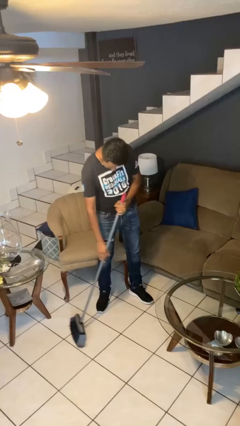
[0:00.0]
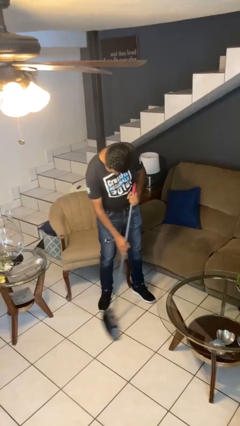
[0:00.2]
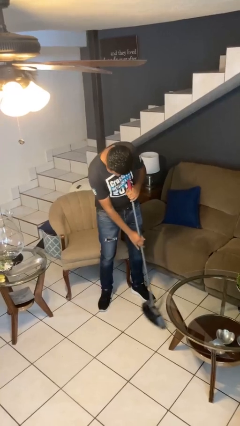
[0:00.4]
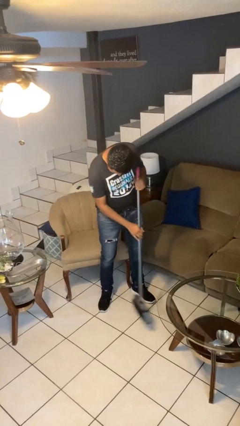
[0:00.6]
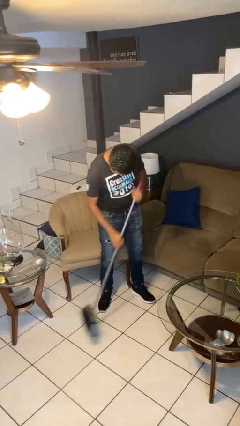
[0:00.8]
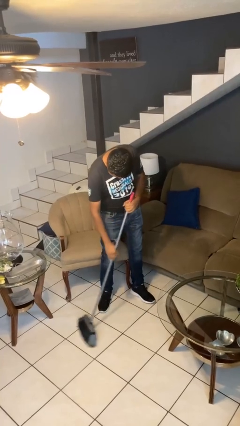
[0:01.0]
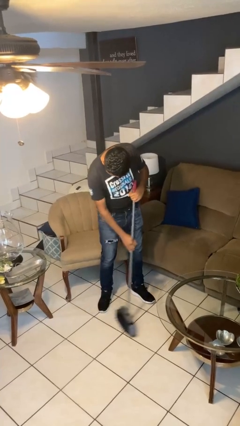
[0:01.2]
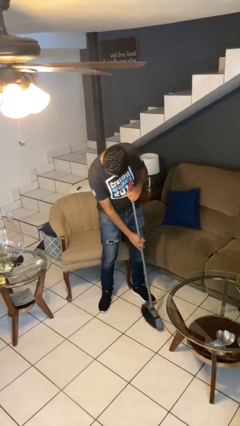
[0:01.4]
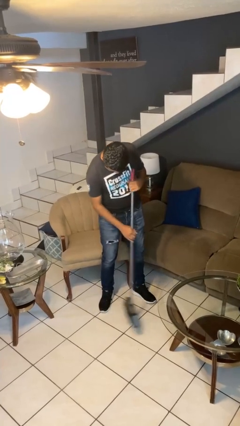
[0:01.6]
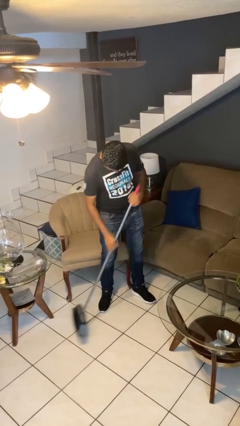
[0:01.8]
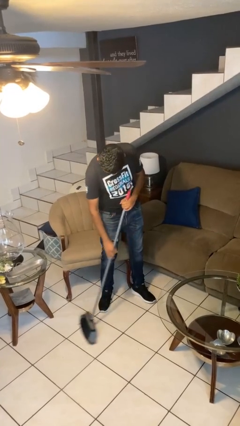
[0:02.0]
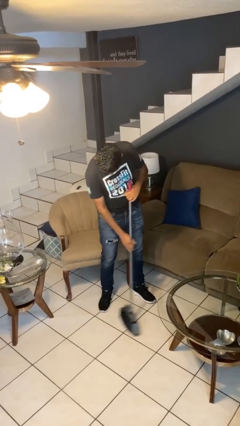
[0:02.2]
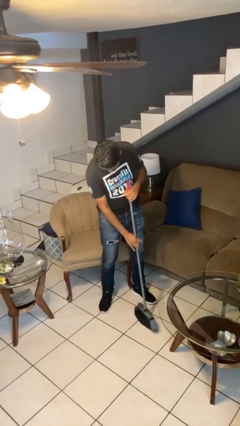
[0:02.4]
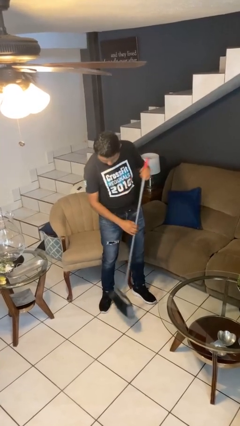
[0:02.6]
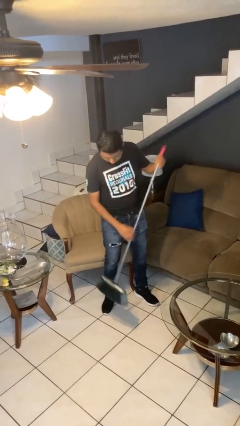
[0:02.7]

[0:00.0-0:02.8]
person sweeps floor

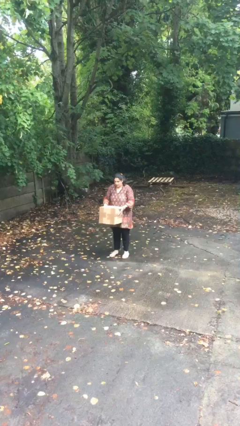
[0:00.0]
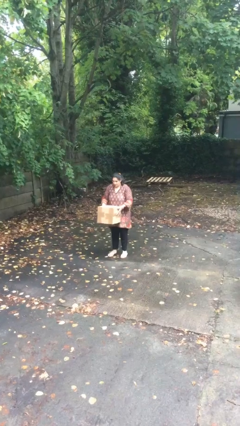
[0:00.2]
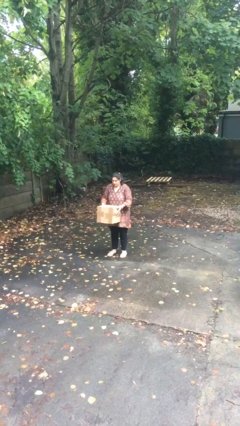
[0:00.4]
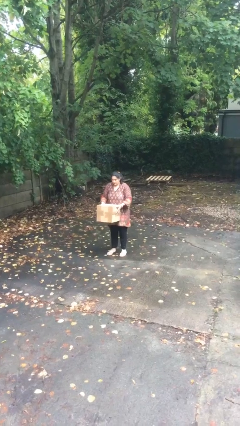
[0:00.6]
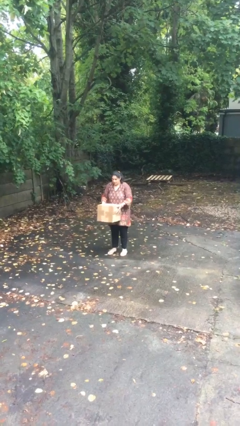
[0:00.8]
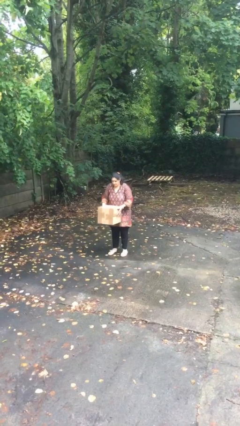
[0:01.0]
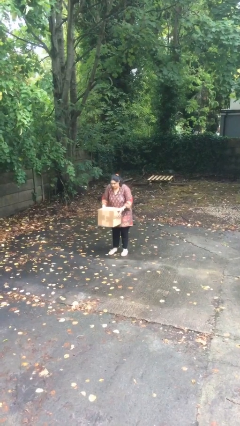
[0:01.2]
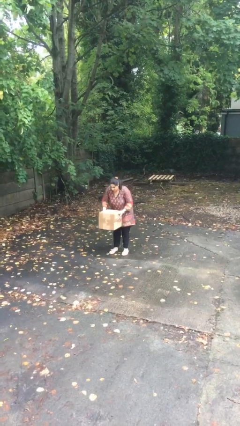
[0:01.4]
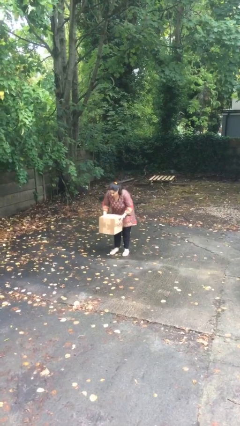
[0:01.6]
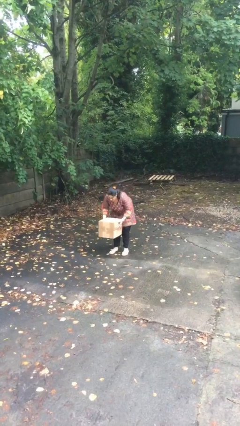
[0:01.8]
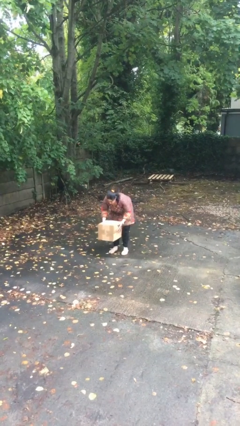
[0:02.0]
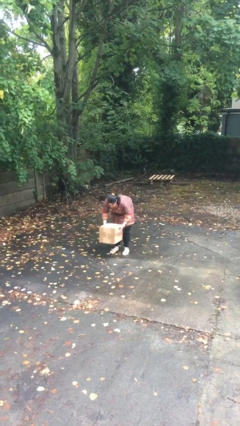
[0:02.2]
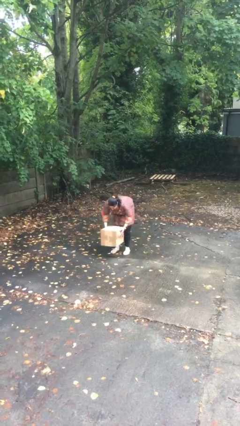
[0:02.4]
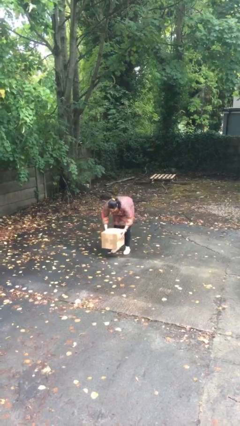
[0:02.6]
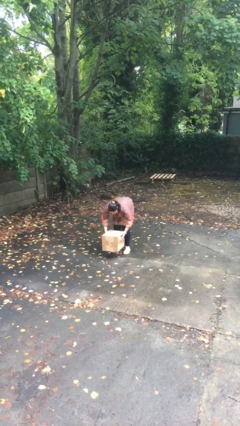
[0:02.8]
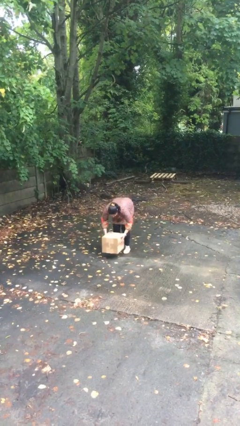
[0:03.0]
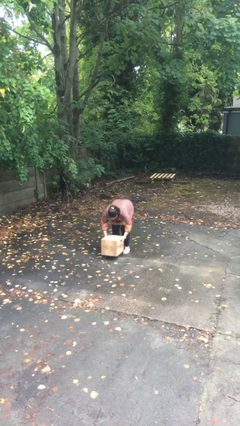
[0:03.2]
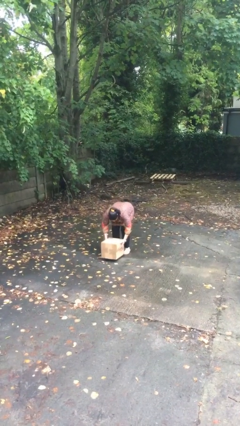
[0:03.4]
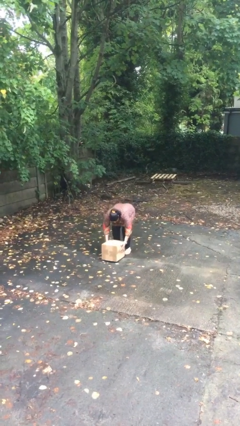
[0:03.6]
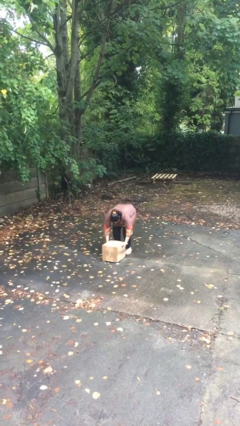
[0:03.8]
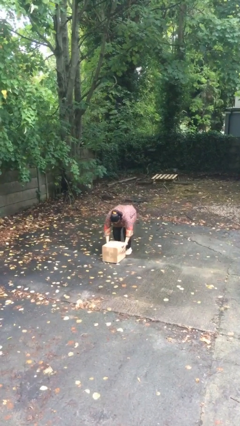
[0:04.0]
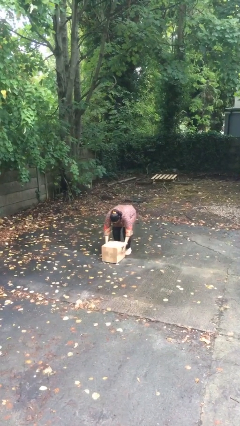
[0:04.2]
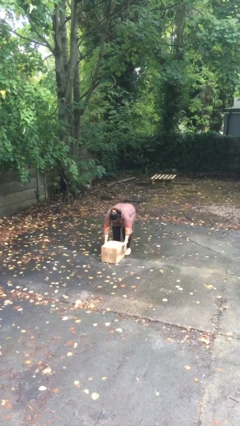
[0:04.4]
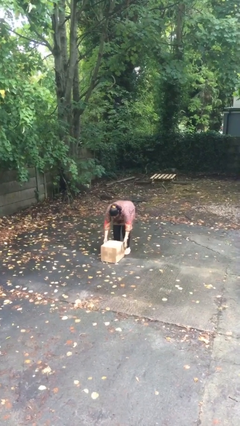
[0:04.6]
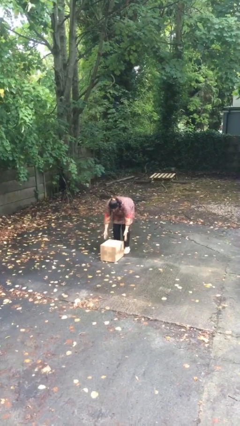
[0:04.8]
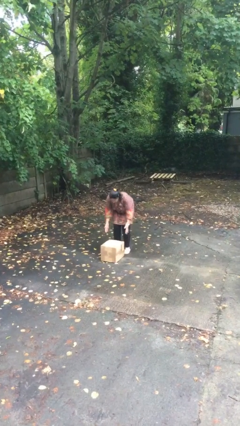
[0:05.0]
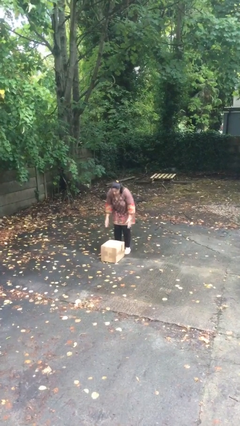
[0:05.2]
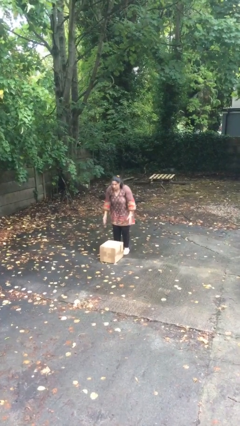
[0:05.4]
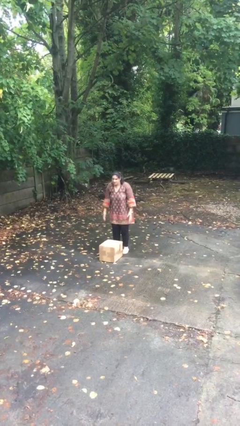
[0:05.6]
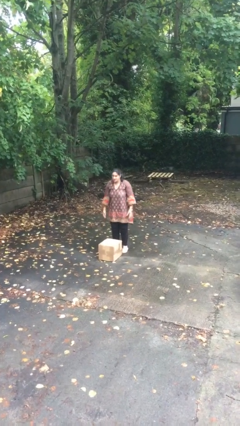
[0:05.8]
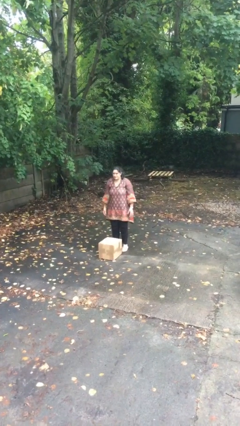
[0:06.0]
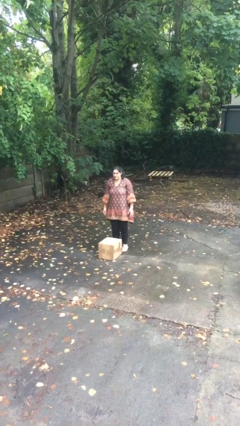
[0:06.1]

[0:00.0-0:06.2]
person puts down object on floor

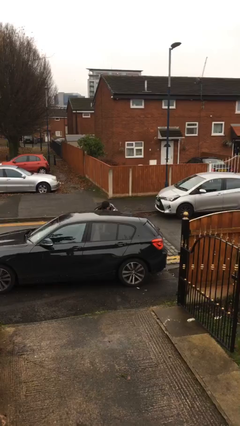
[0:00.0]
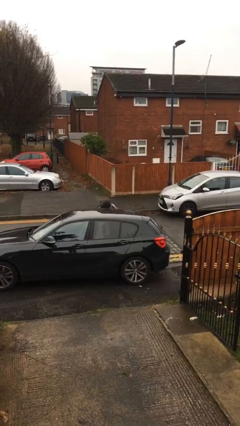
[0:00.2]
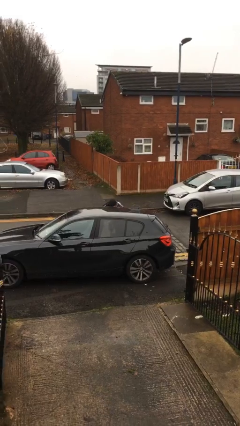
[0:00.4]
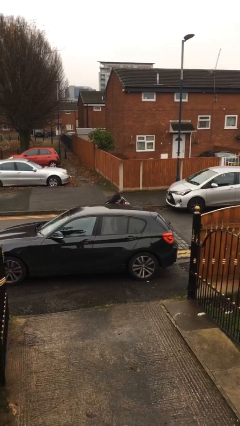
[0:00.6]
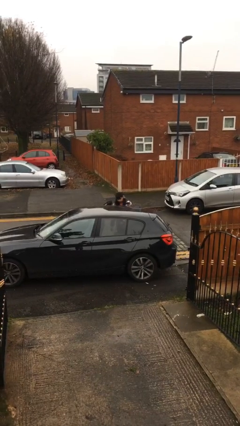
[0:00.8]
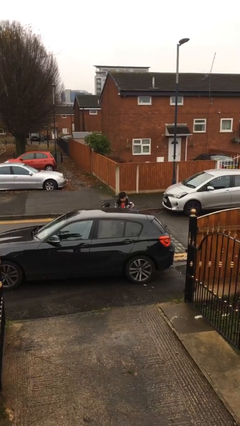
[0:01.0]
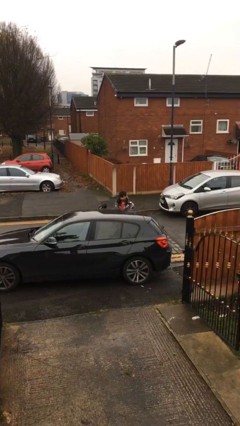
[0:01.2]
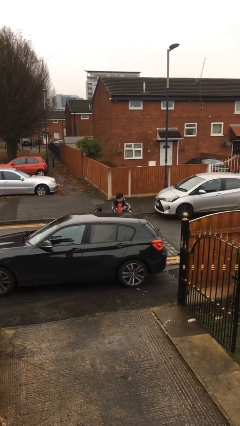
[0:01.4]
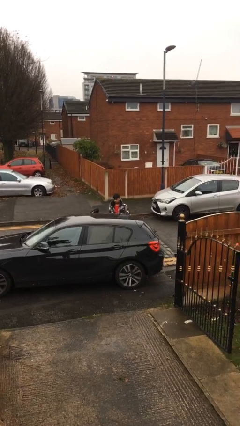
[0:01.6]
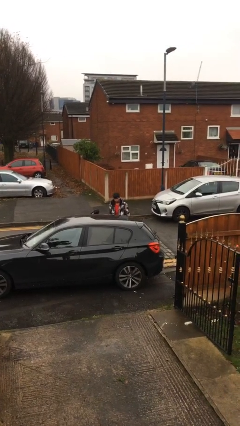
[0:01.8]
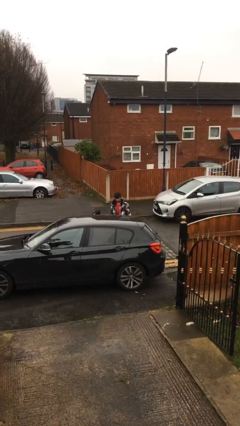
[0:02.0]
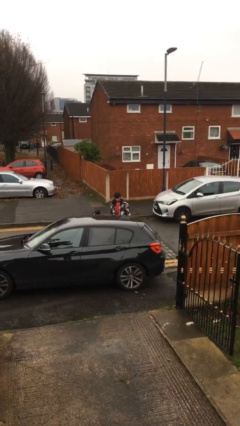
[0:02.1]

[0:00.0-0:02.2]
person loads car

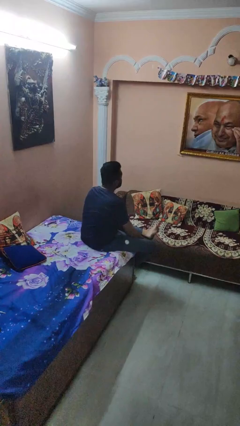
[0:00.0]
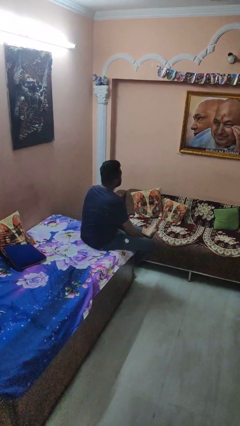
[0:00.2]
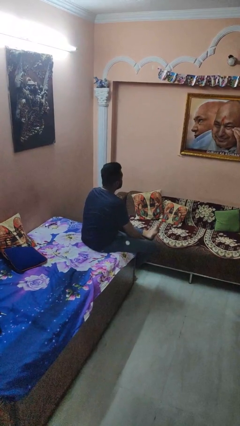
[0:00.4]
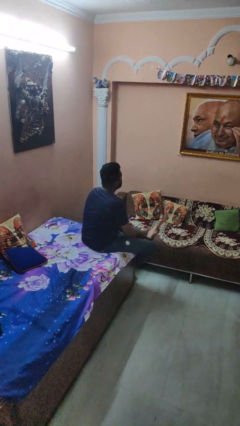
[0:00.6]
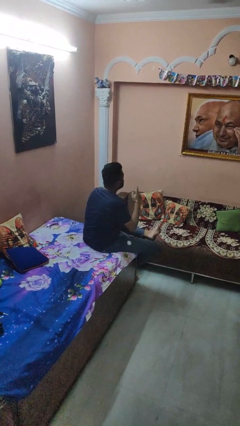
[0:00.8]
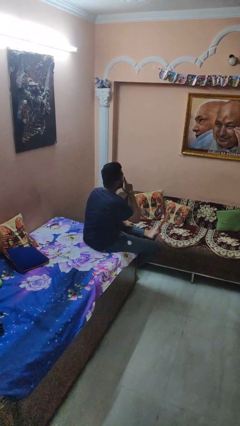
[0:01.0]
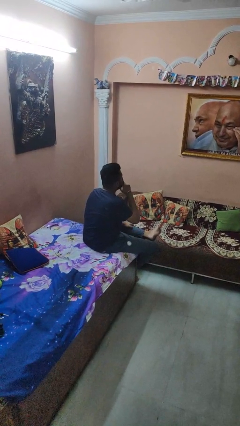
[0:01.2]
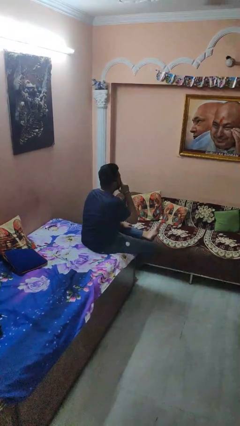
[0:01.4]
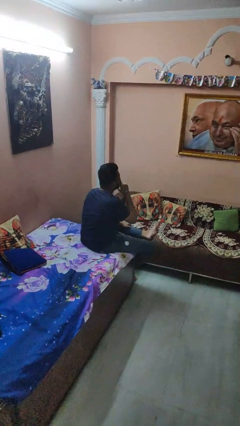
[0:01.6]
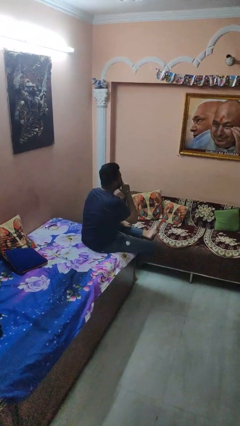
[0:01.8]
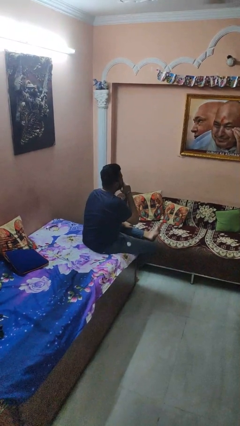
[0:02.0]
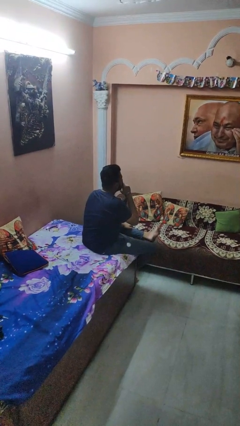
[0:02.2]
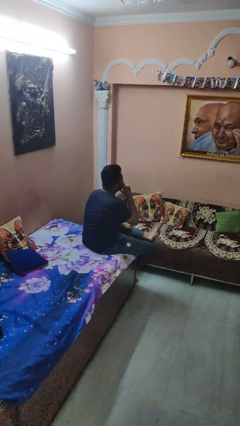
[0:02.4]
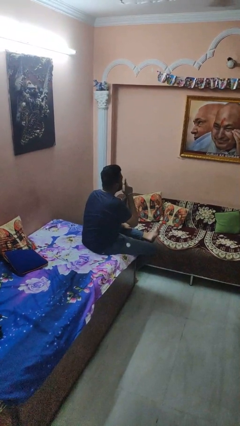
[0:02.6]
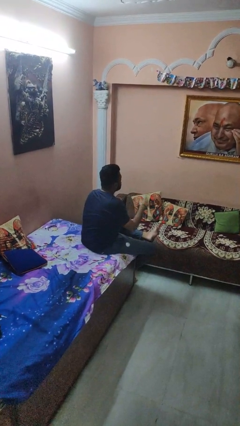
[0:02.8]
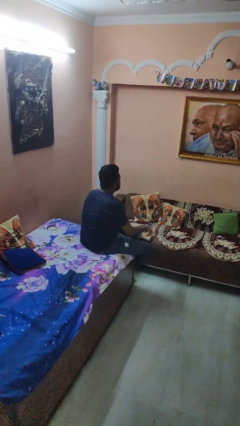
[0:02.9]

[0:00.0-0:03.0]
person gestures be quiet

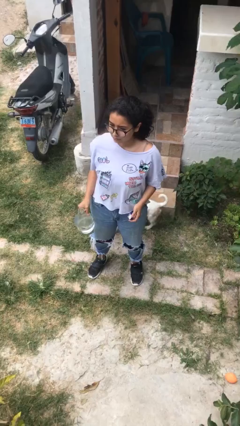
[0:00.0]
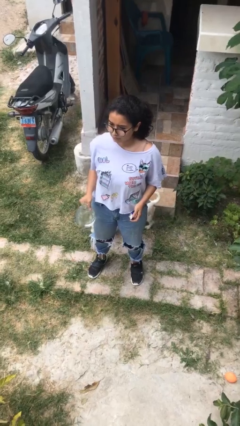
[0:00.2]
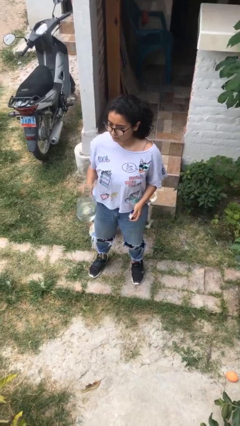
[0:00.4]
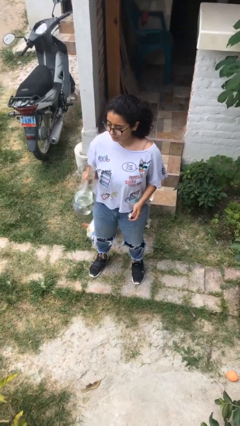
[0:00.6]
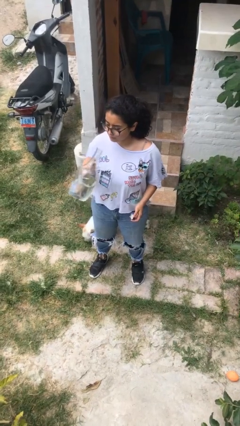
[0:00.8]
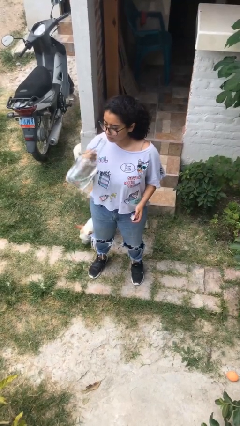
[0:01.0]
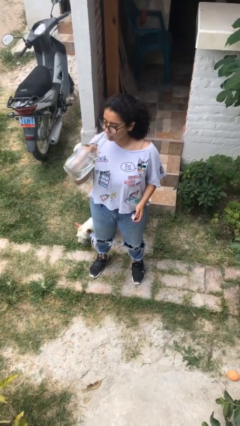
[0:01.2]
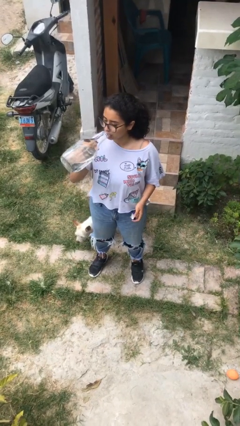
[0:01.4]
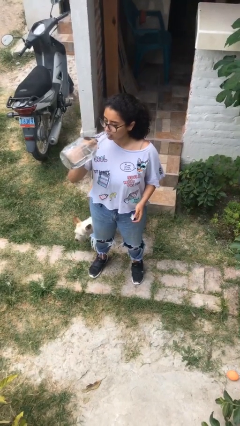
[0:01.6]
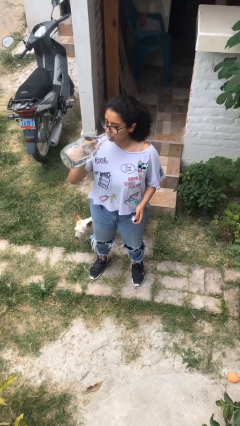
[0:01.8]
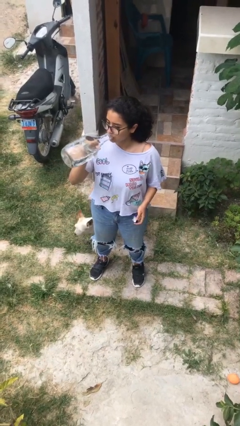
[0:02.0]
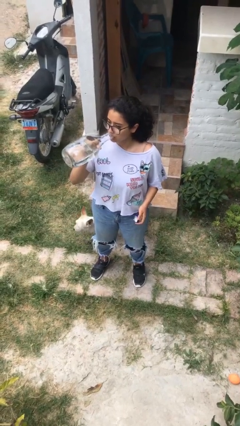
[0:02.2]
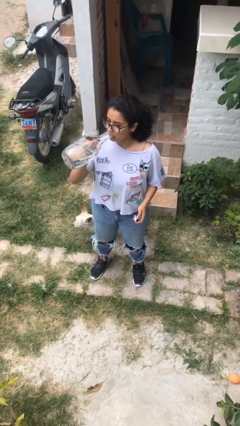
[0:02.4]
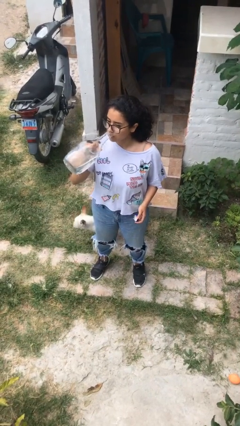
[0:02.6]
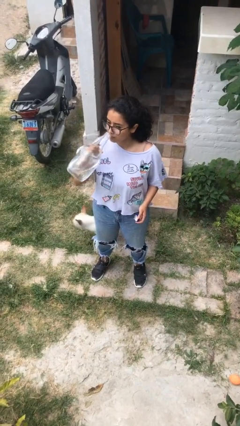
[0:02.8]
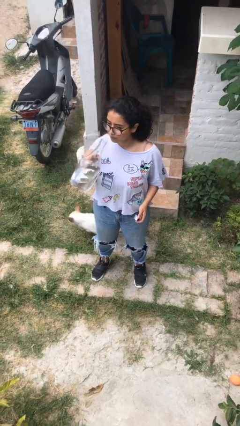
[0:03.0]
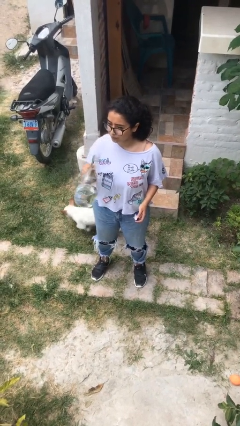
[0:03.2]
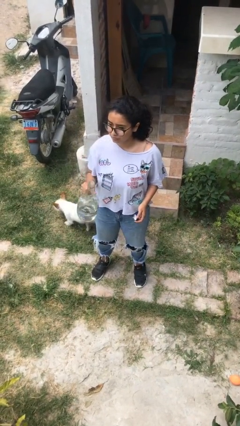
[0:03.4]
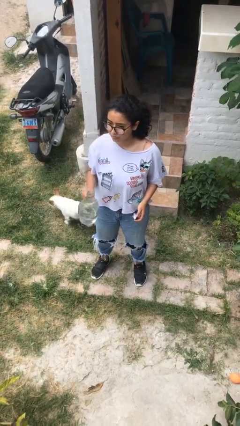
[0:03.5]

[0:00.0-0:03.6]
person drinks from bottle
